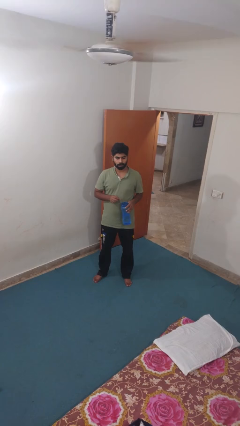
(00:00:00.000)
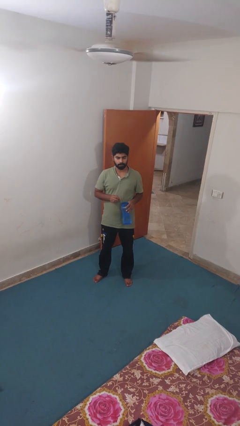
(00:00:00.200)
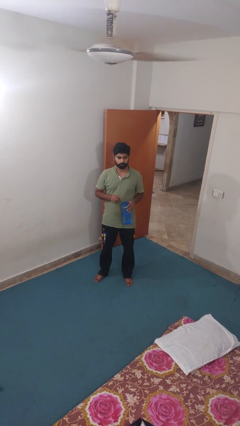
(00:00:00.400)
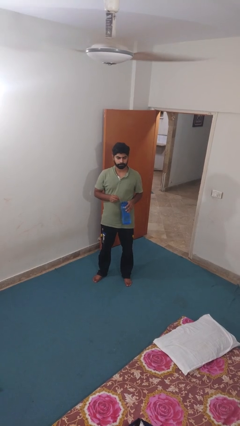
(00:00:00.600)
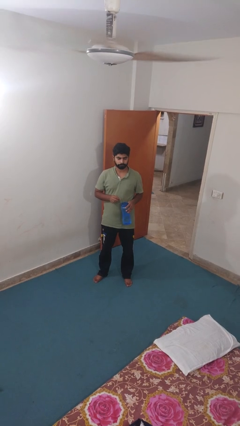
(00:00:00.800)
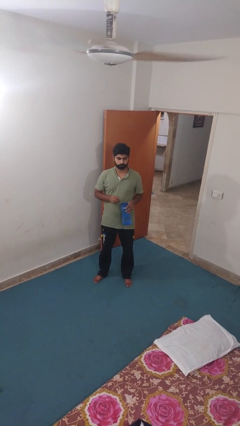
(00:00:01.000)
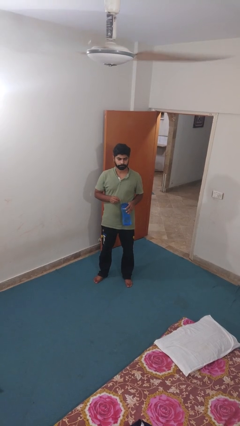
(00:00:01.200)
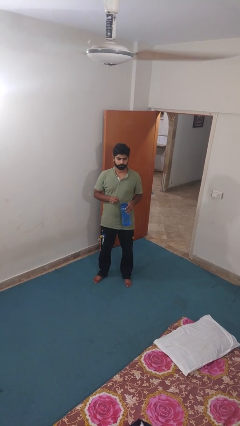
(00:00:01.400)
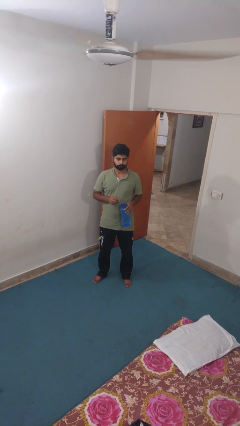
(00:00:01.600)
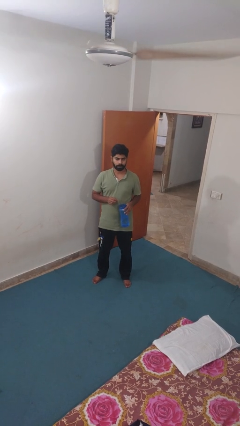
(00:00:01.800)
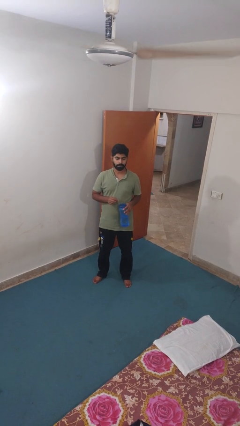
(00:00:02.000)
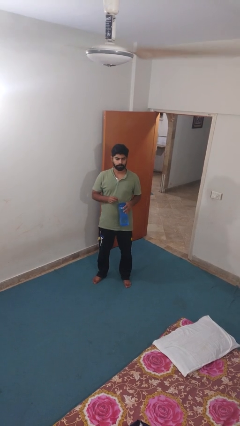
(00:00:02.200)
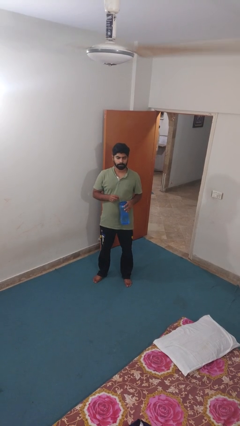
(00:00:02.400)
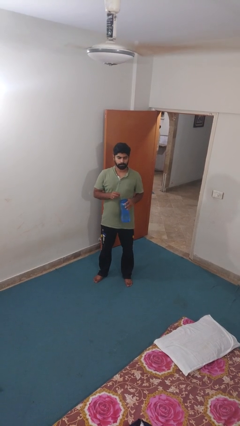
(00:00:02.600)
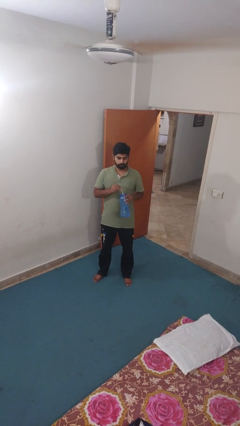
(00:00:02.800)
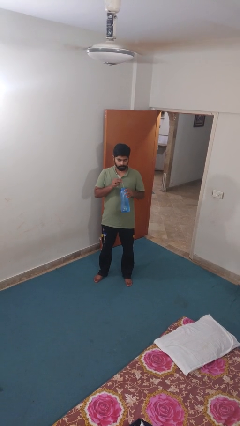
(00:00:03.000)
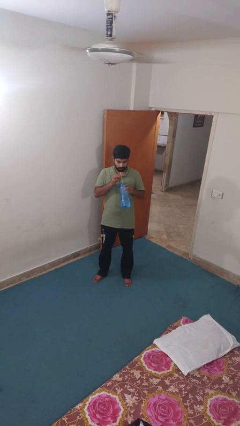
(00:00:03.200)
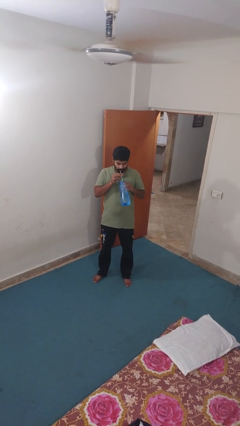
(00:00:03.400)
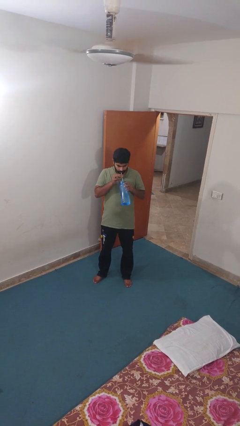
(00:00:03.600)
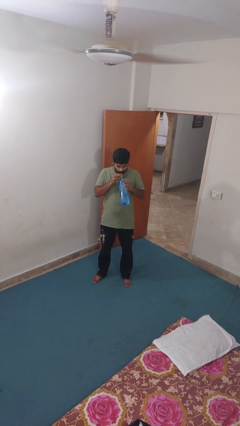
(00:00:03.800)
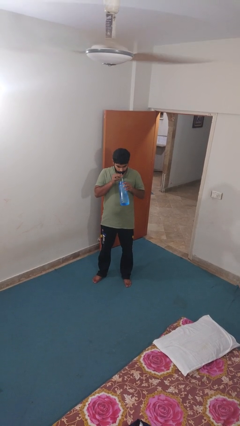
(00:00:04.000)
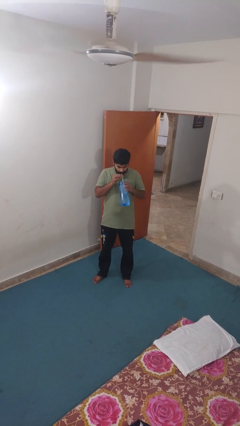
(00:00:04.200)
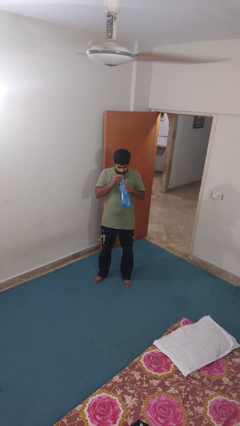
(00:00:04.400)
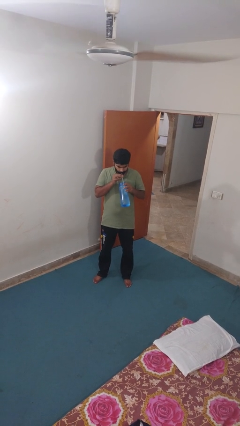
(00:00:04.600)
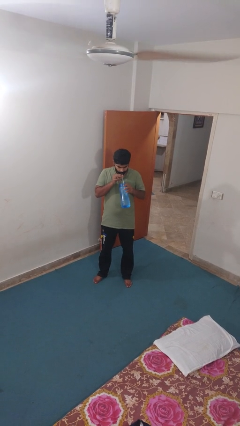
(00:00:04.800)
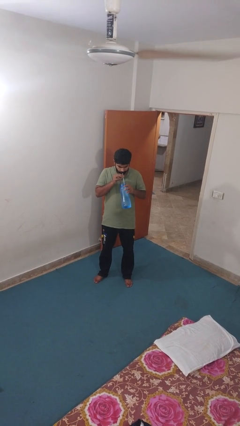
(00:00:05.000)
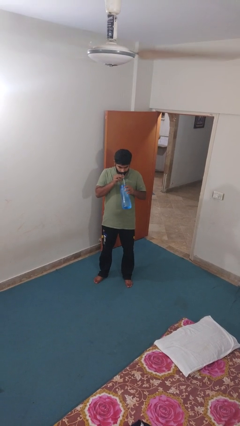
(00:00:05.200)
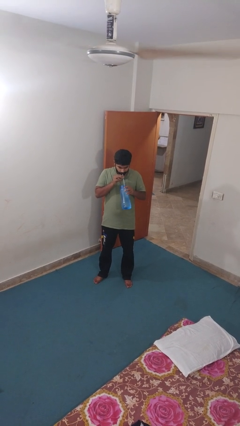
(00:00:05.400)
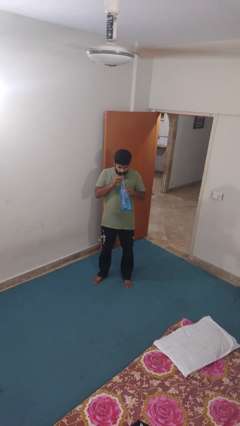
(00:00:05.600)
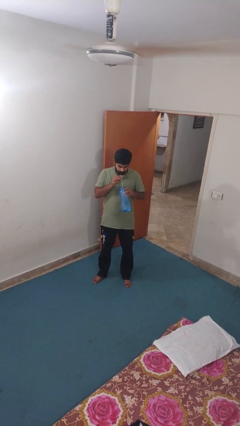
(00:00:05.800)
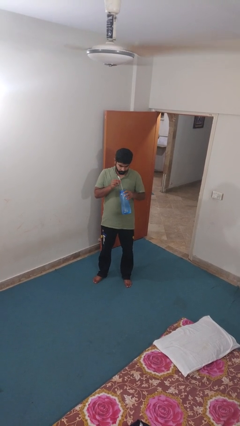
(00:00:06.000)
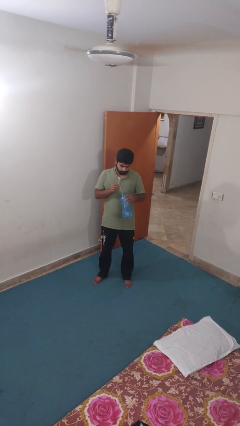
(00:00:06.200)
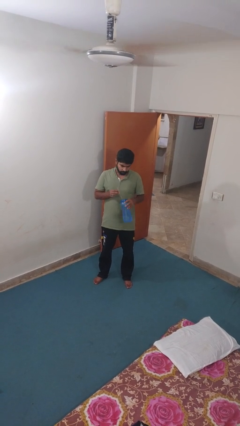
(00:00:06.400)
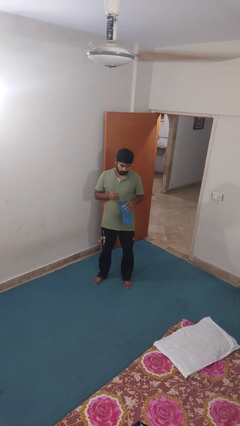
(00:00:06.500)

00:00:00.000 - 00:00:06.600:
person drinks from straw

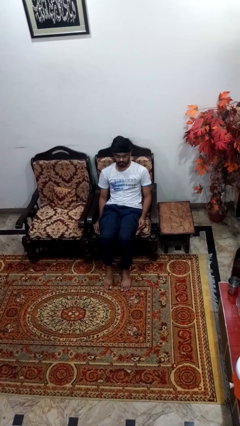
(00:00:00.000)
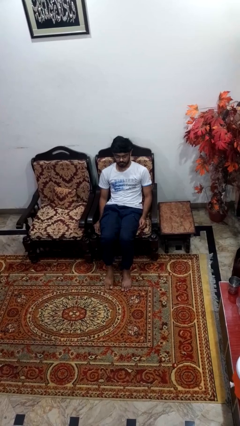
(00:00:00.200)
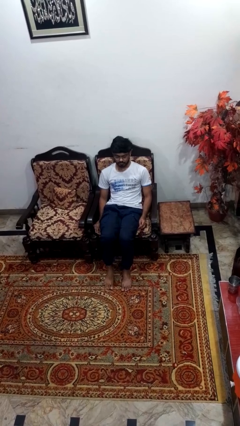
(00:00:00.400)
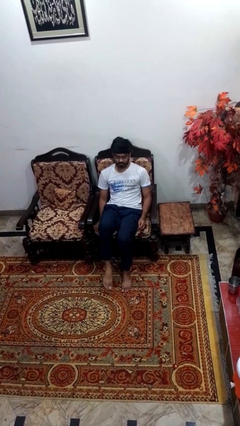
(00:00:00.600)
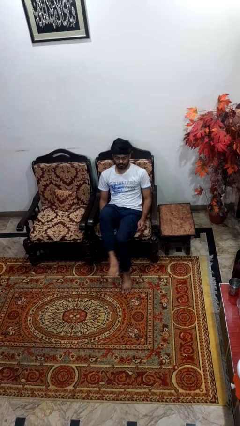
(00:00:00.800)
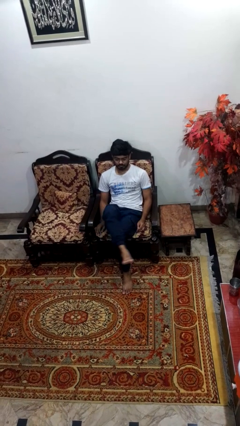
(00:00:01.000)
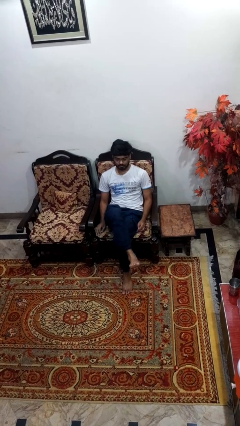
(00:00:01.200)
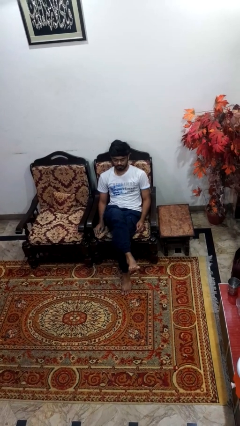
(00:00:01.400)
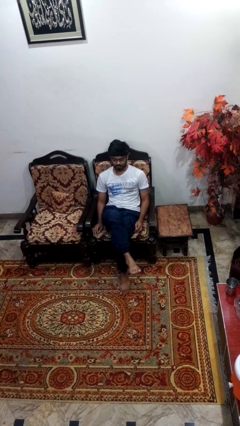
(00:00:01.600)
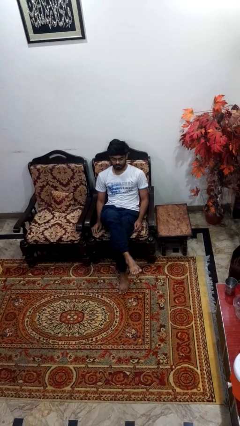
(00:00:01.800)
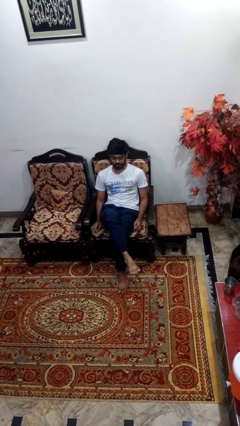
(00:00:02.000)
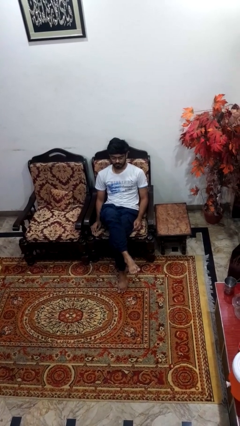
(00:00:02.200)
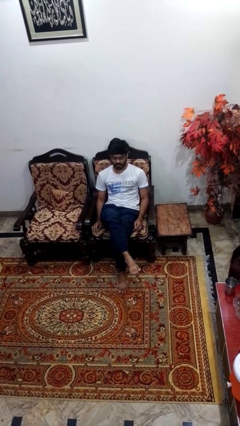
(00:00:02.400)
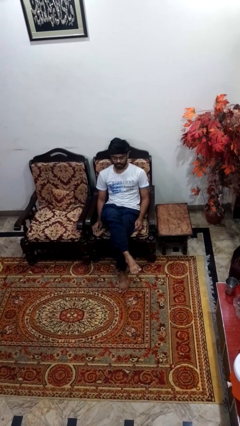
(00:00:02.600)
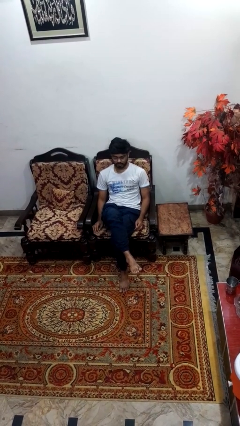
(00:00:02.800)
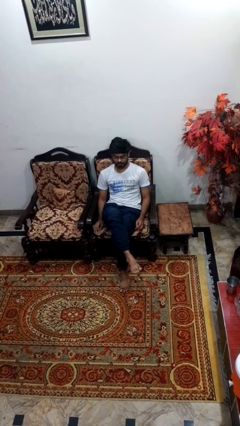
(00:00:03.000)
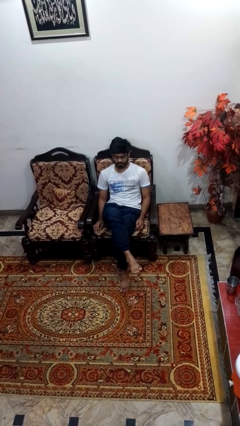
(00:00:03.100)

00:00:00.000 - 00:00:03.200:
person crosses legs

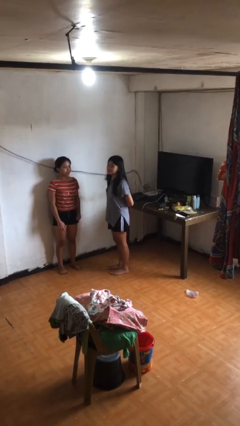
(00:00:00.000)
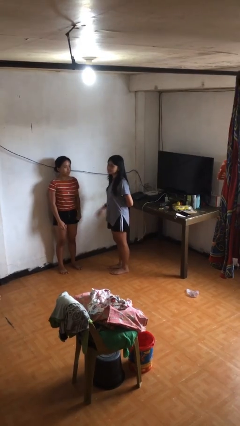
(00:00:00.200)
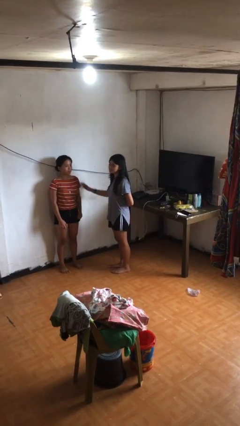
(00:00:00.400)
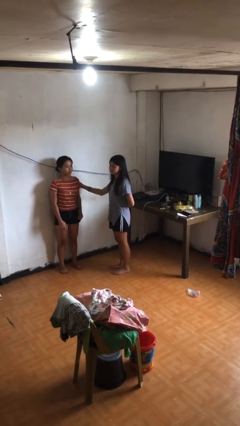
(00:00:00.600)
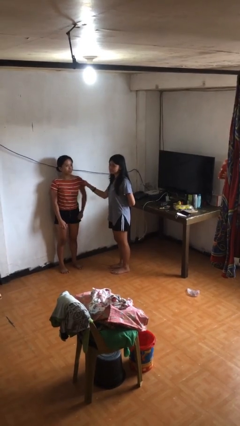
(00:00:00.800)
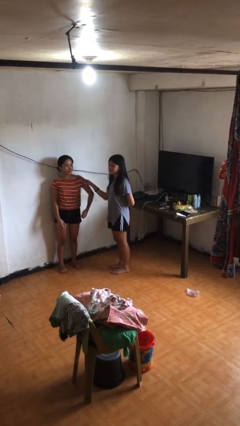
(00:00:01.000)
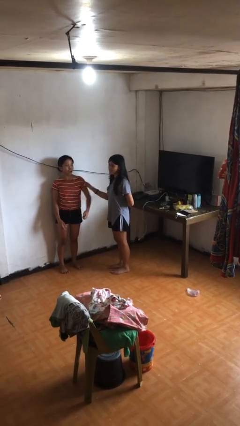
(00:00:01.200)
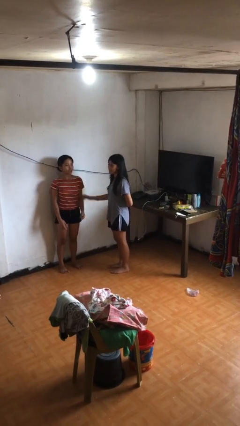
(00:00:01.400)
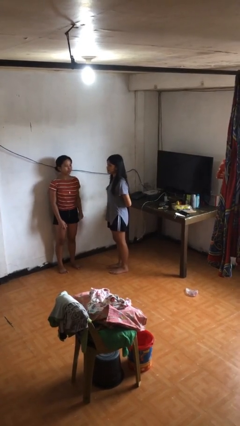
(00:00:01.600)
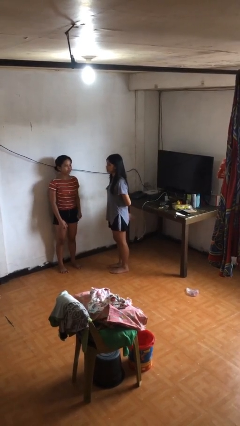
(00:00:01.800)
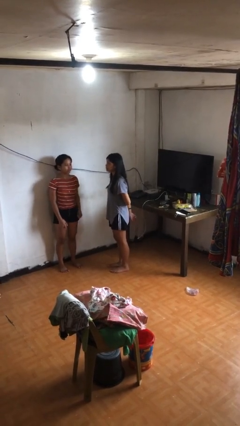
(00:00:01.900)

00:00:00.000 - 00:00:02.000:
person grabs person by bicep

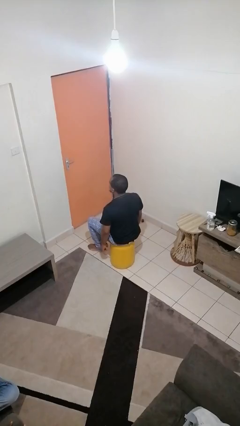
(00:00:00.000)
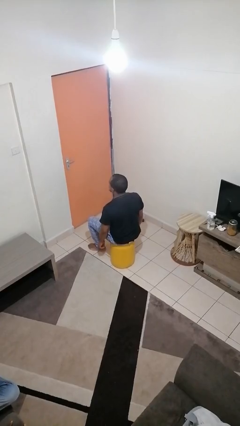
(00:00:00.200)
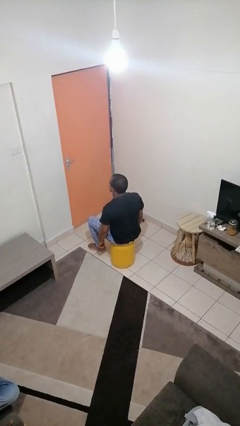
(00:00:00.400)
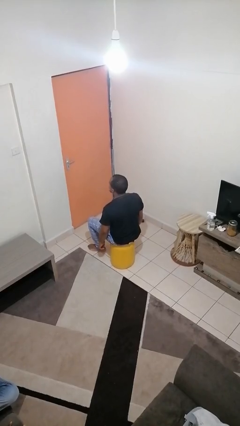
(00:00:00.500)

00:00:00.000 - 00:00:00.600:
person puts fingers in ear

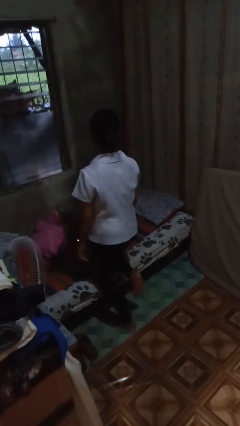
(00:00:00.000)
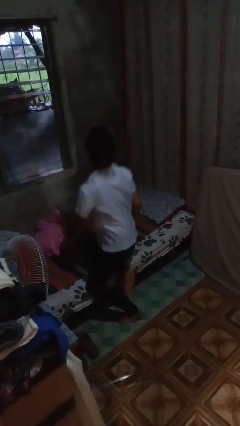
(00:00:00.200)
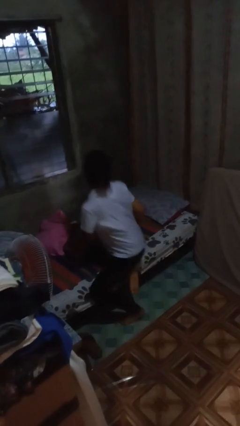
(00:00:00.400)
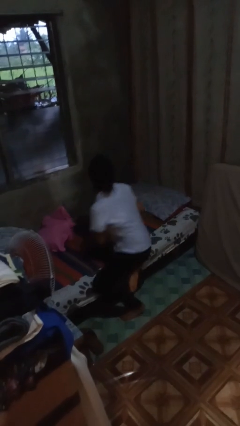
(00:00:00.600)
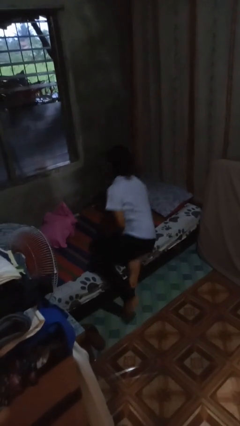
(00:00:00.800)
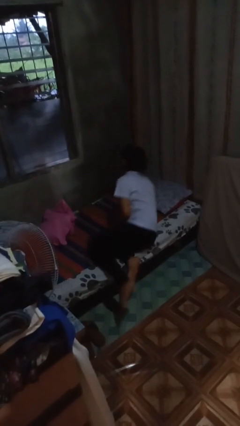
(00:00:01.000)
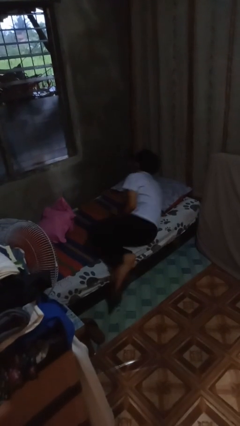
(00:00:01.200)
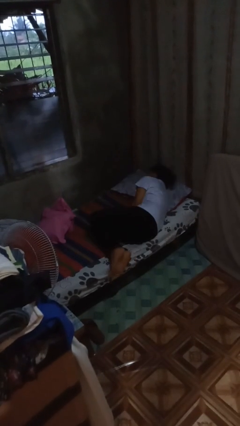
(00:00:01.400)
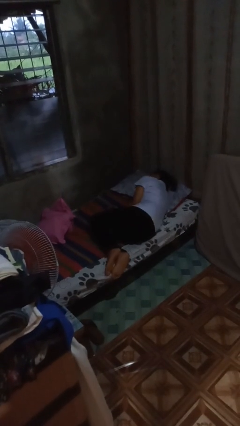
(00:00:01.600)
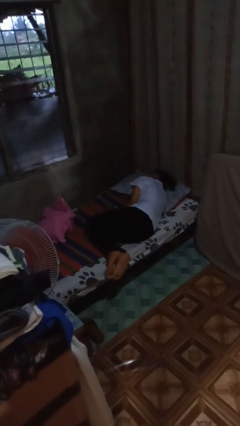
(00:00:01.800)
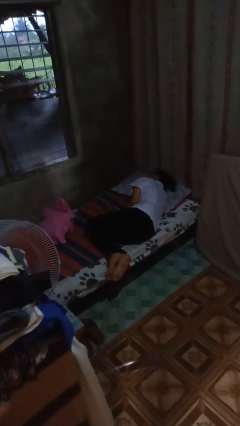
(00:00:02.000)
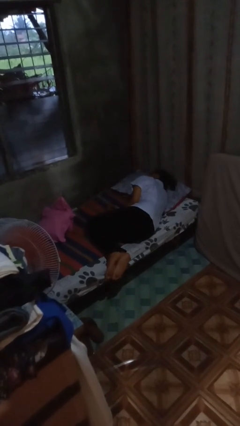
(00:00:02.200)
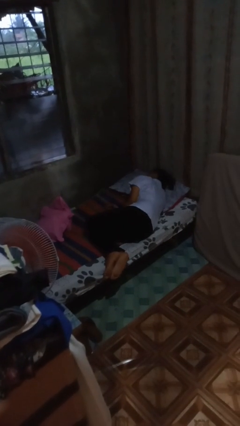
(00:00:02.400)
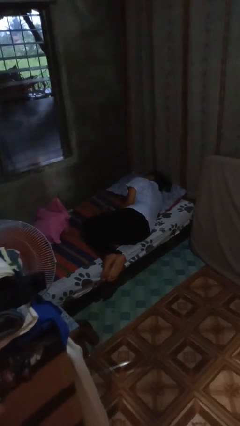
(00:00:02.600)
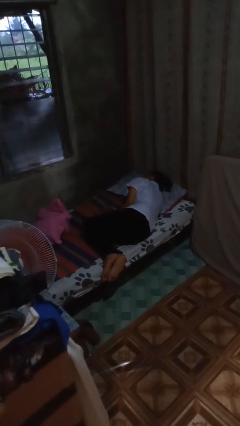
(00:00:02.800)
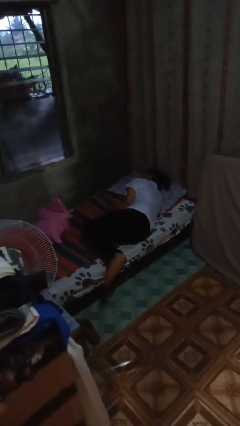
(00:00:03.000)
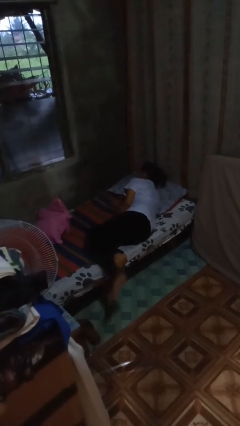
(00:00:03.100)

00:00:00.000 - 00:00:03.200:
person lies down on bed

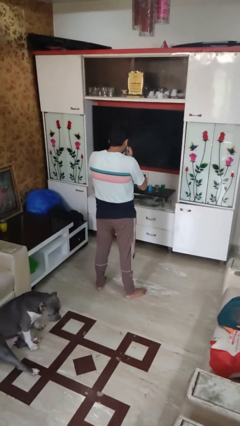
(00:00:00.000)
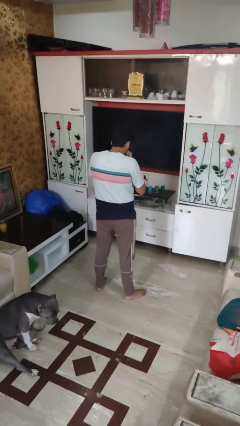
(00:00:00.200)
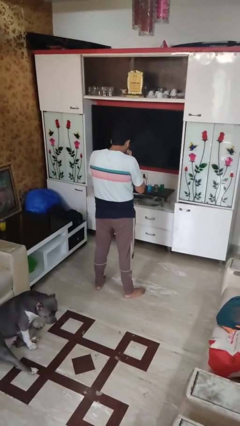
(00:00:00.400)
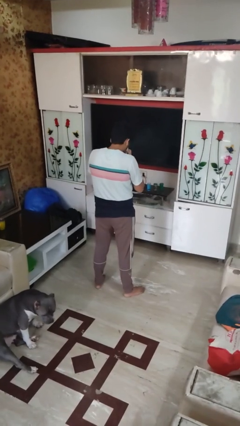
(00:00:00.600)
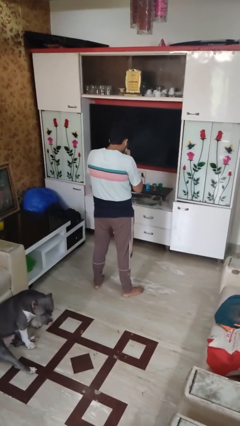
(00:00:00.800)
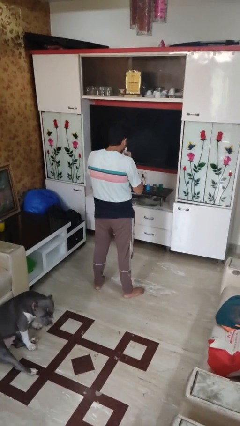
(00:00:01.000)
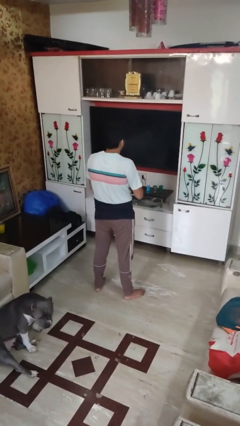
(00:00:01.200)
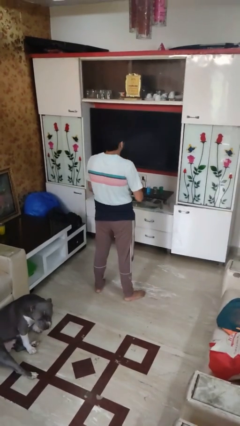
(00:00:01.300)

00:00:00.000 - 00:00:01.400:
person blows nose
